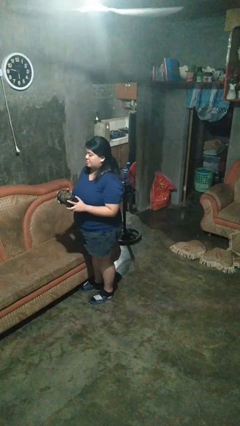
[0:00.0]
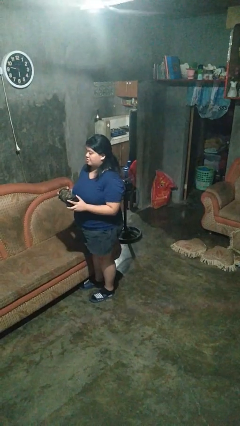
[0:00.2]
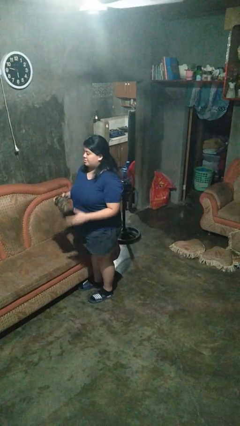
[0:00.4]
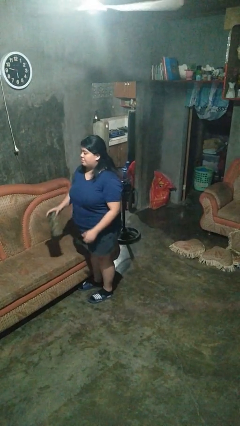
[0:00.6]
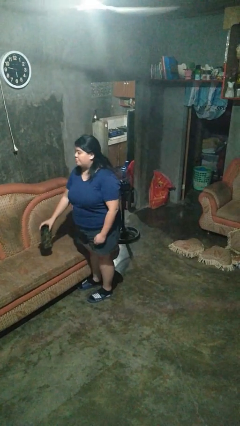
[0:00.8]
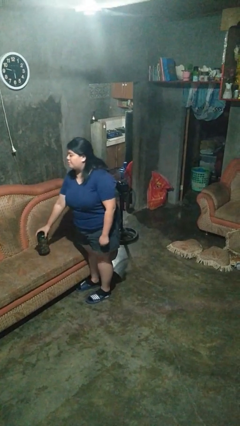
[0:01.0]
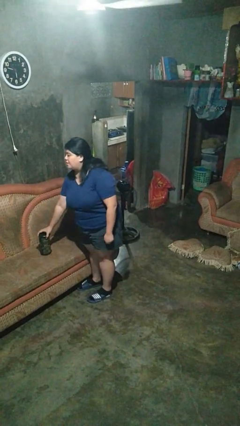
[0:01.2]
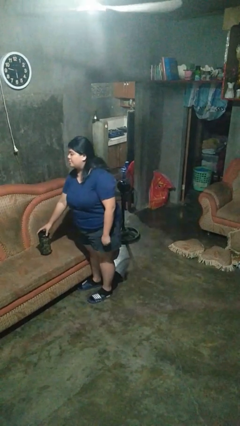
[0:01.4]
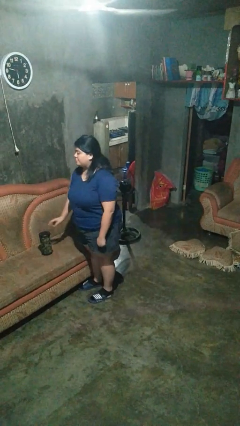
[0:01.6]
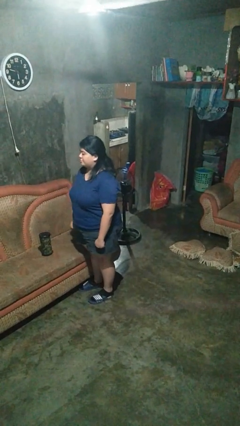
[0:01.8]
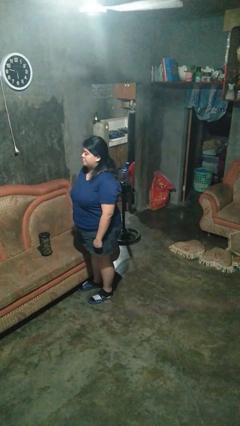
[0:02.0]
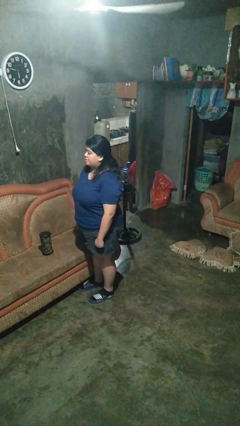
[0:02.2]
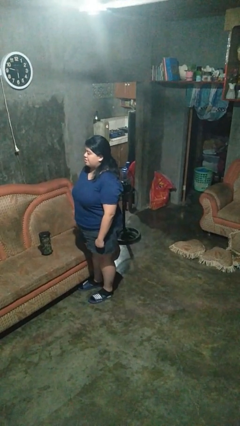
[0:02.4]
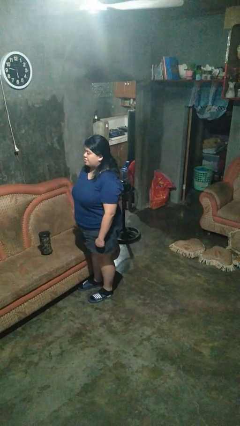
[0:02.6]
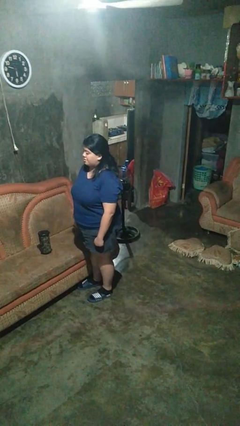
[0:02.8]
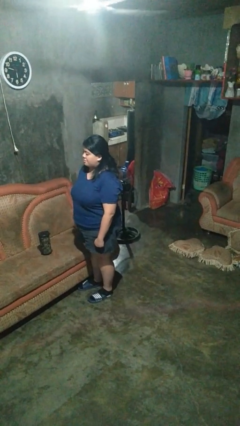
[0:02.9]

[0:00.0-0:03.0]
person puts down object on couch

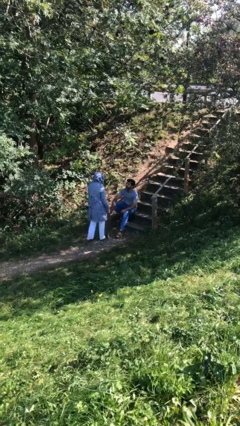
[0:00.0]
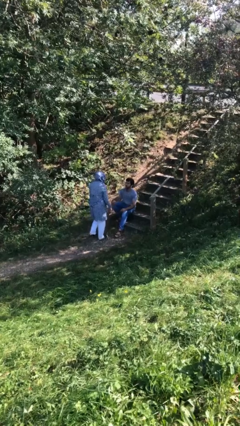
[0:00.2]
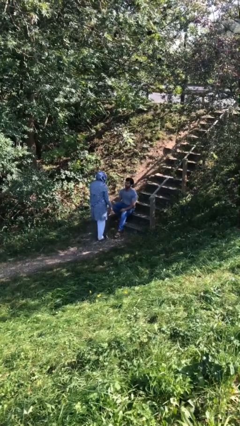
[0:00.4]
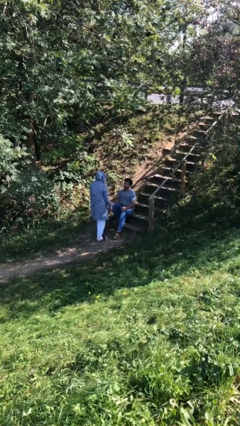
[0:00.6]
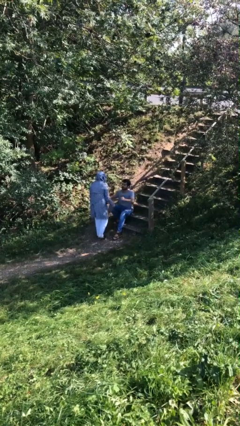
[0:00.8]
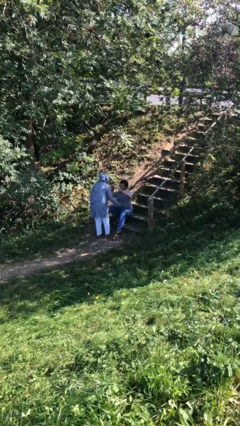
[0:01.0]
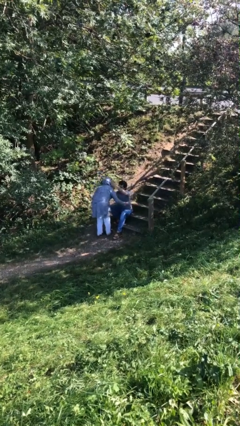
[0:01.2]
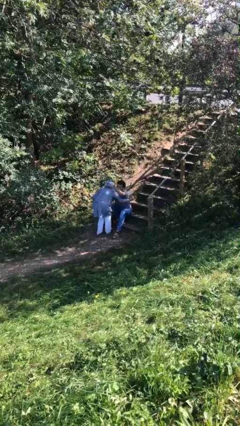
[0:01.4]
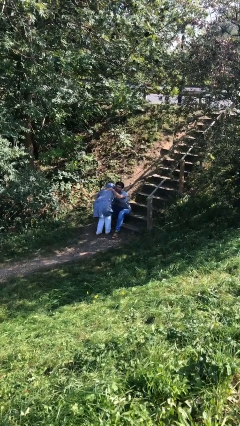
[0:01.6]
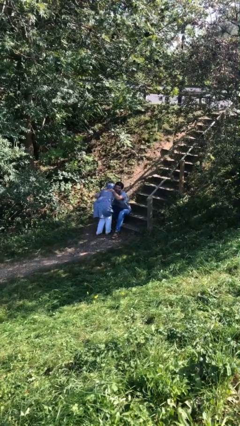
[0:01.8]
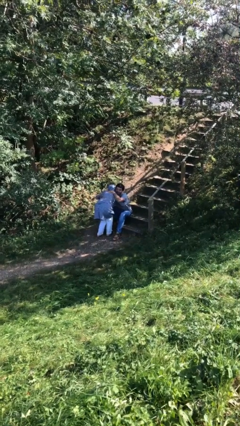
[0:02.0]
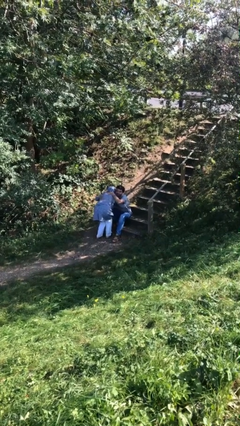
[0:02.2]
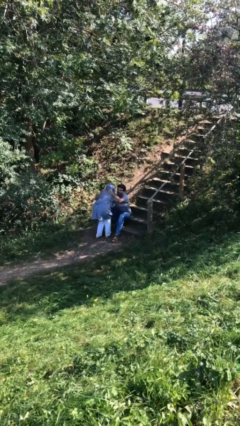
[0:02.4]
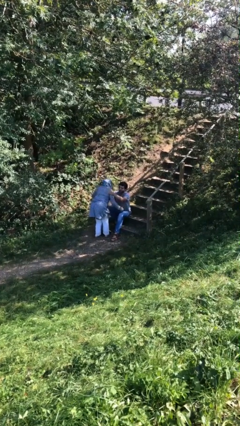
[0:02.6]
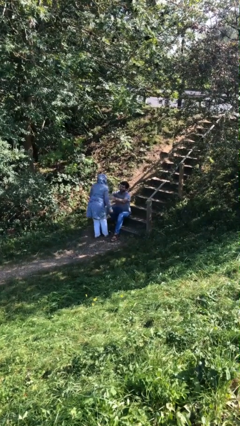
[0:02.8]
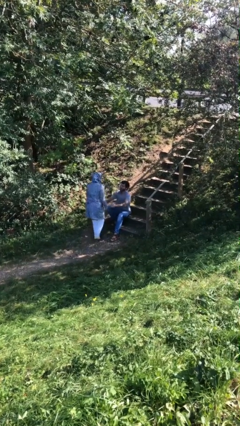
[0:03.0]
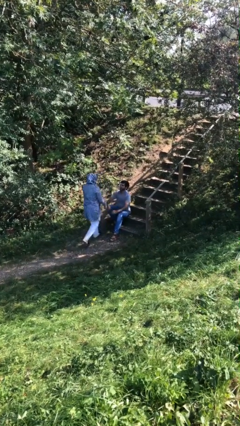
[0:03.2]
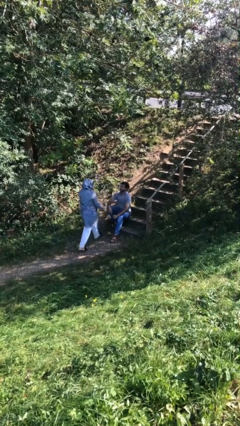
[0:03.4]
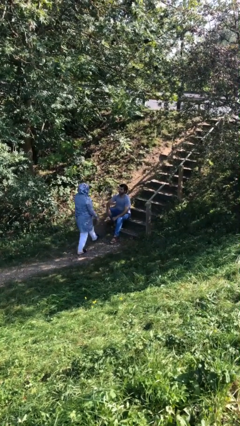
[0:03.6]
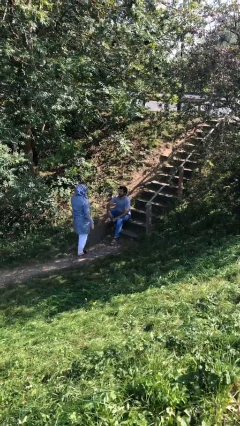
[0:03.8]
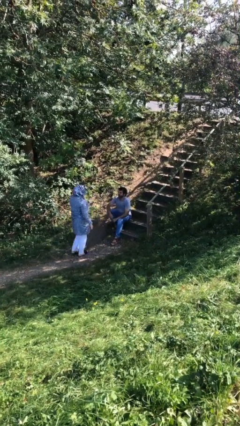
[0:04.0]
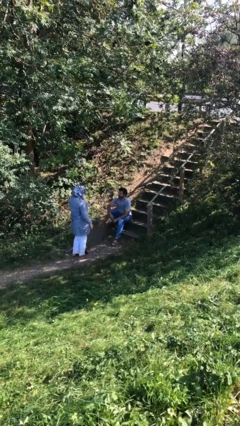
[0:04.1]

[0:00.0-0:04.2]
person embraces person

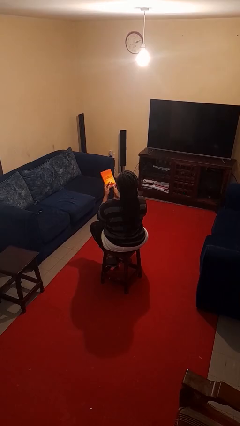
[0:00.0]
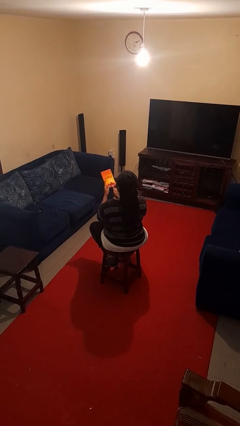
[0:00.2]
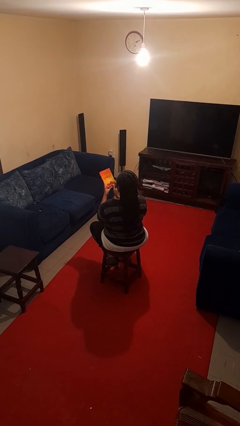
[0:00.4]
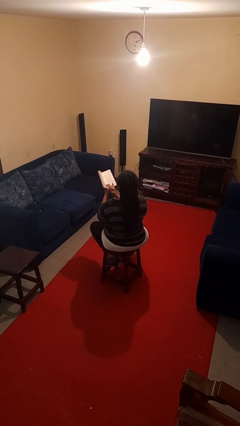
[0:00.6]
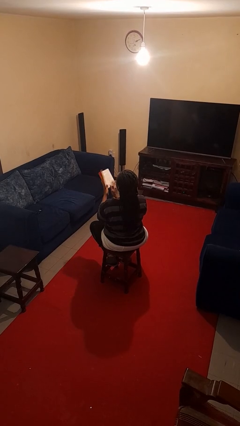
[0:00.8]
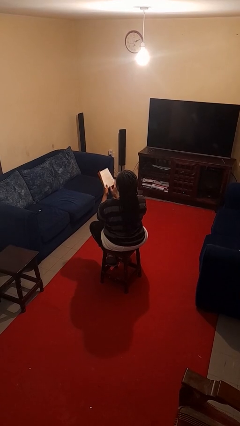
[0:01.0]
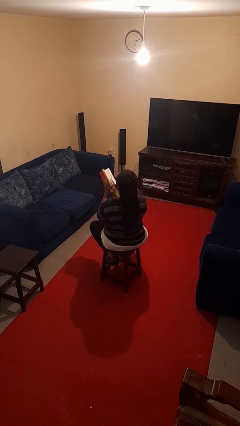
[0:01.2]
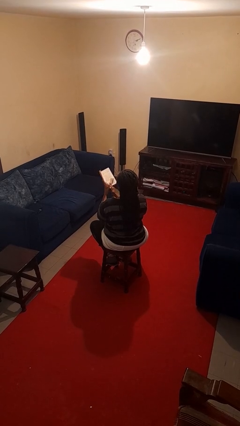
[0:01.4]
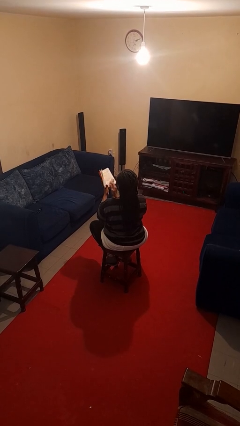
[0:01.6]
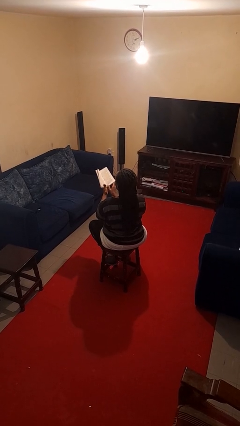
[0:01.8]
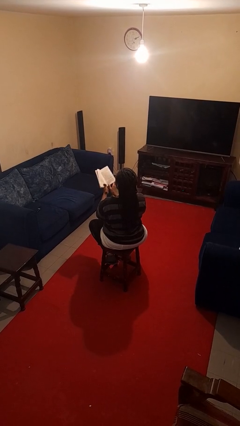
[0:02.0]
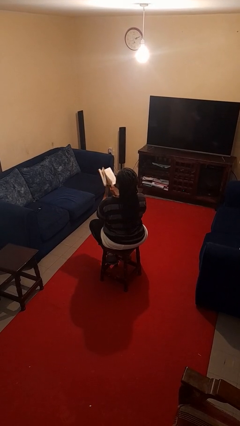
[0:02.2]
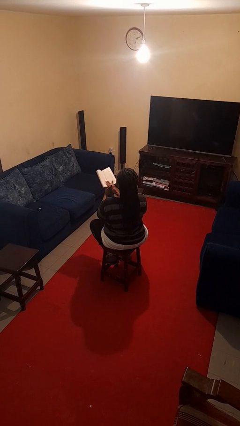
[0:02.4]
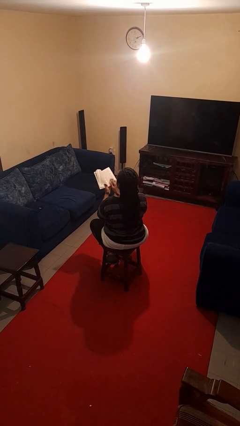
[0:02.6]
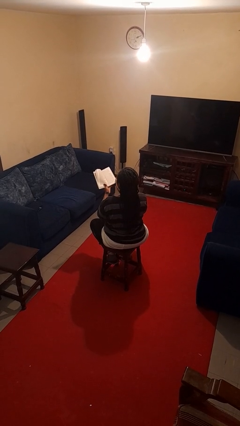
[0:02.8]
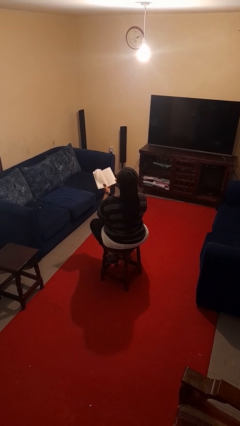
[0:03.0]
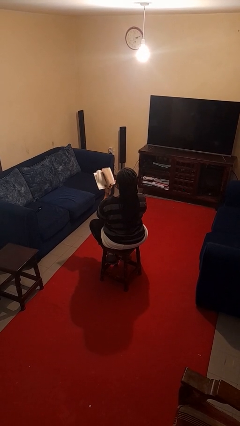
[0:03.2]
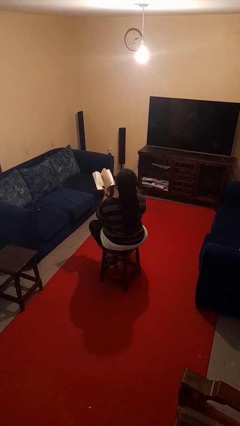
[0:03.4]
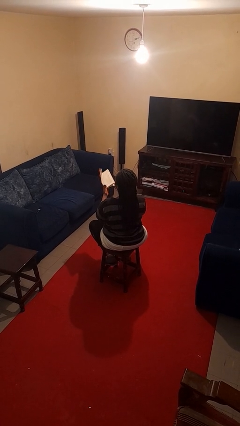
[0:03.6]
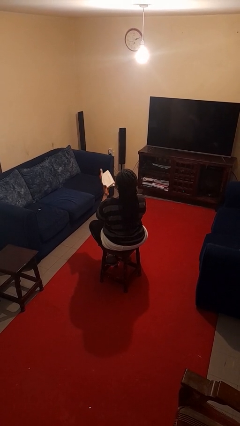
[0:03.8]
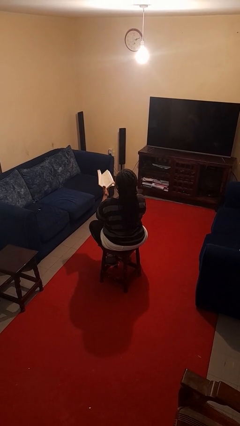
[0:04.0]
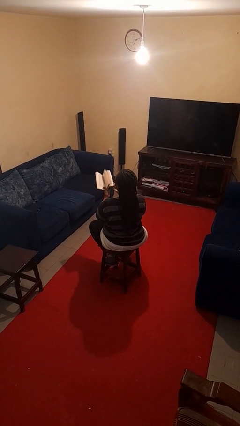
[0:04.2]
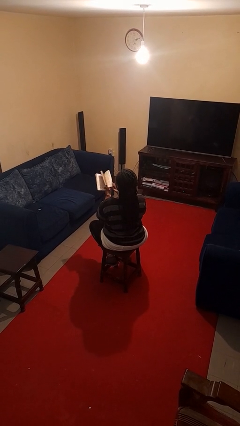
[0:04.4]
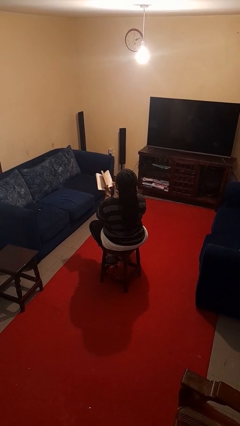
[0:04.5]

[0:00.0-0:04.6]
person reads book

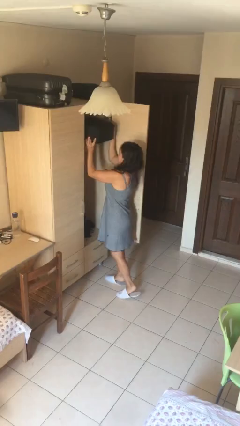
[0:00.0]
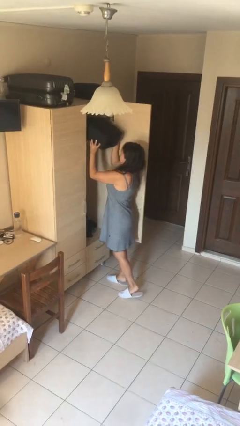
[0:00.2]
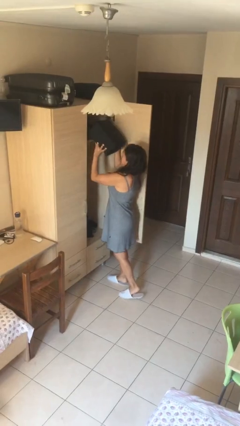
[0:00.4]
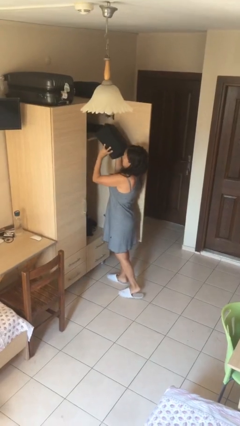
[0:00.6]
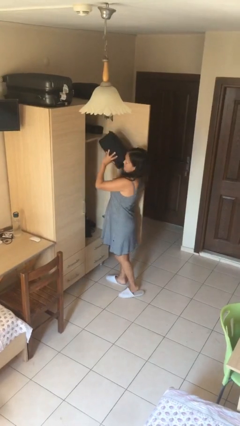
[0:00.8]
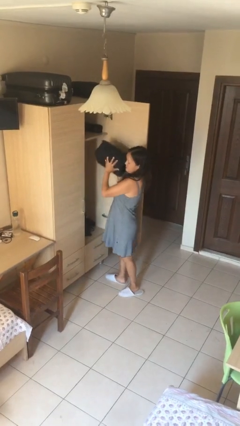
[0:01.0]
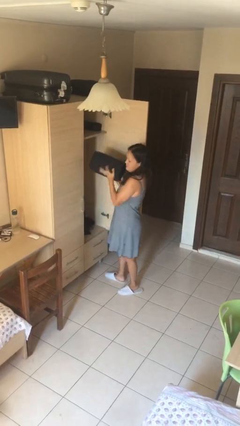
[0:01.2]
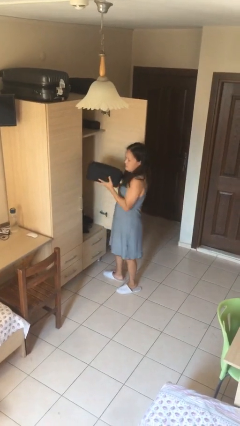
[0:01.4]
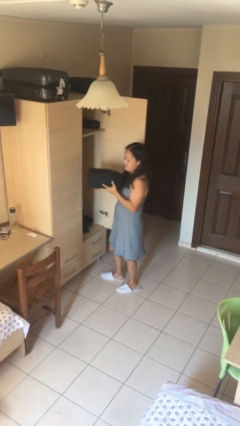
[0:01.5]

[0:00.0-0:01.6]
person picks up object from shelf

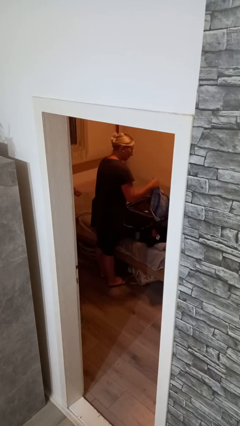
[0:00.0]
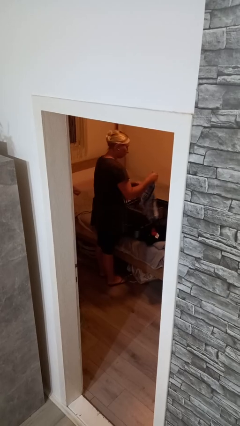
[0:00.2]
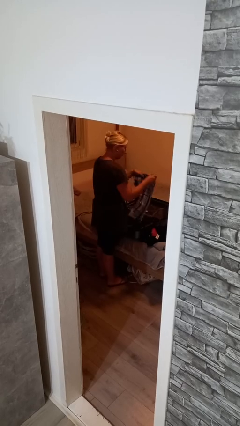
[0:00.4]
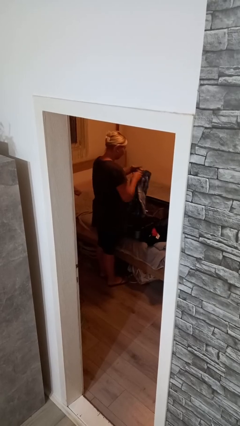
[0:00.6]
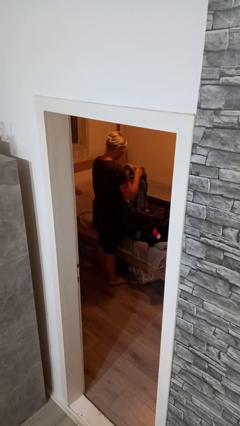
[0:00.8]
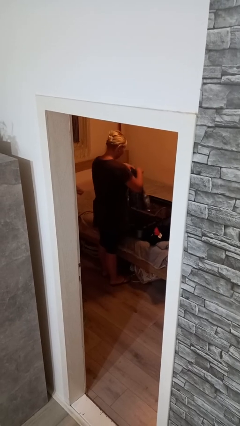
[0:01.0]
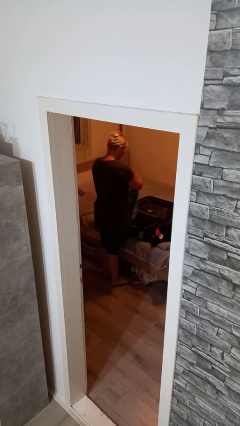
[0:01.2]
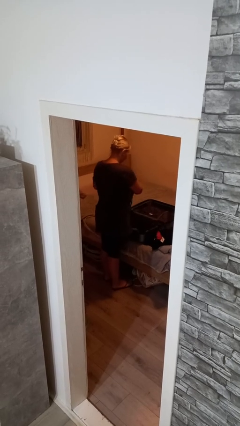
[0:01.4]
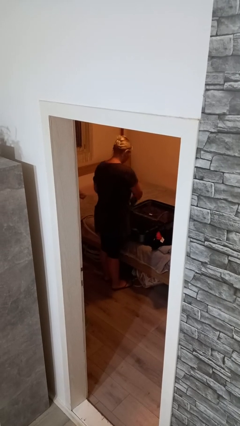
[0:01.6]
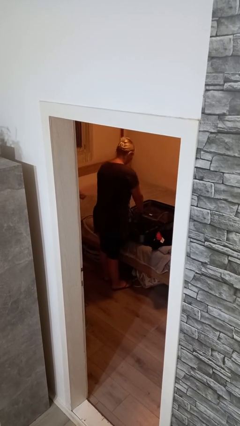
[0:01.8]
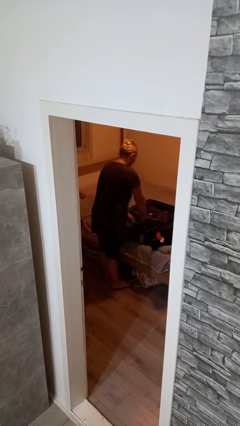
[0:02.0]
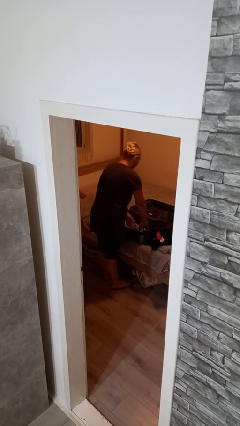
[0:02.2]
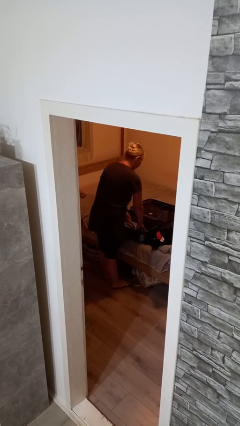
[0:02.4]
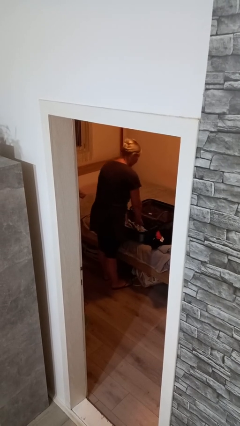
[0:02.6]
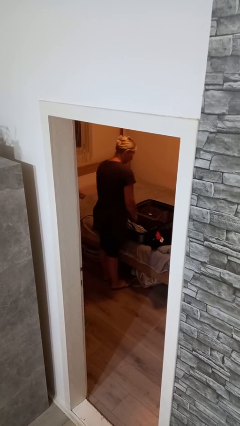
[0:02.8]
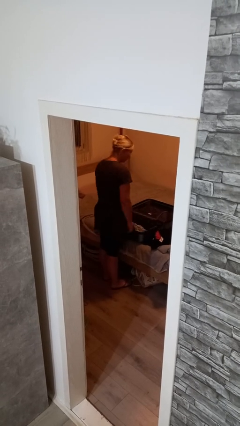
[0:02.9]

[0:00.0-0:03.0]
person loads clothes into suitcase

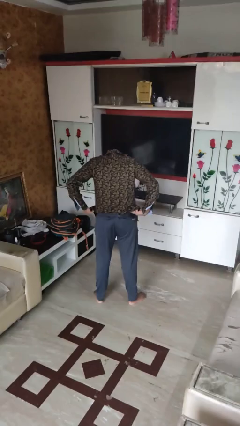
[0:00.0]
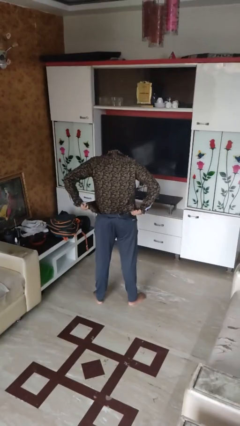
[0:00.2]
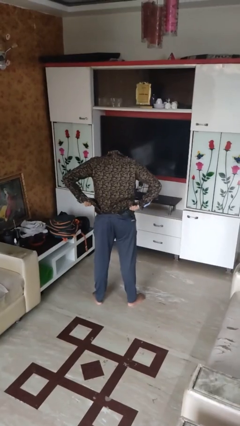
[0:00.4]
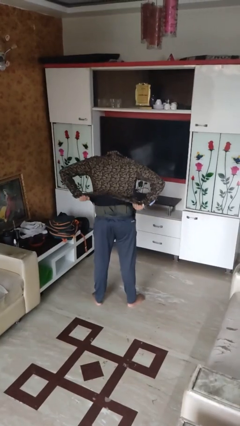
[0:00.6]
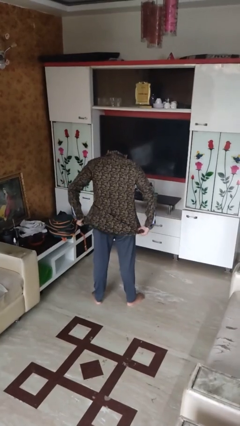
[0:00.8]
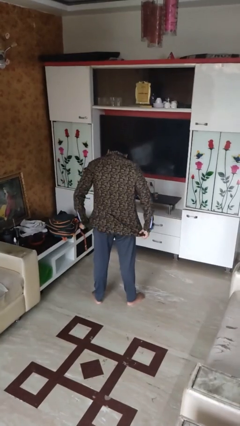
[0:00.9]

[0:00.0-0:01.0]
person untucks shirt

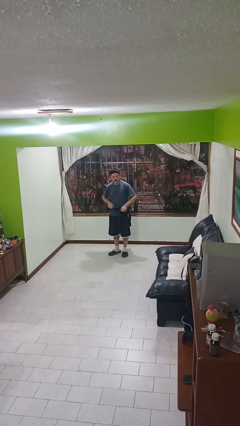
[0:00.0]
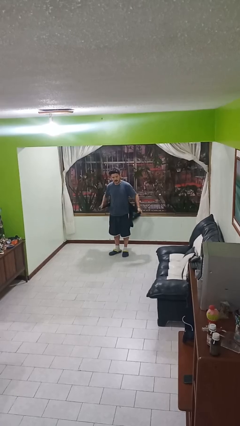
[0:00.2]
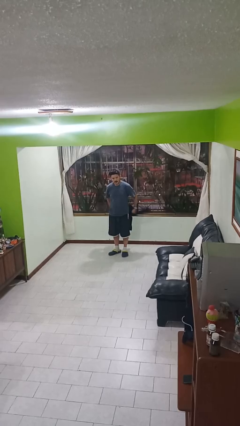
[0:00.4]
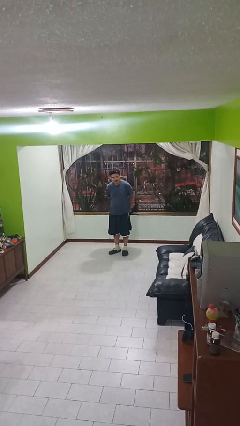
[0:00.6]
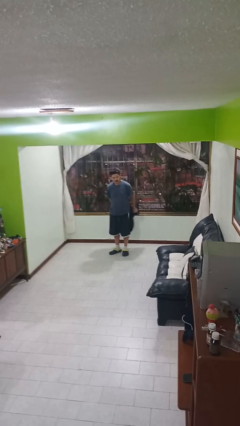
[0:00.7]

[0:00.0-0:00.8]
person unties jacket around waist
